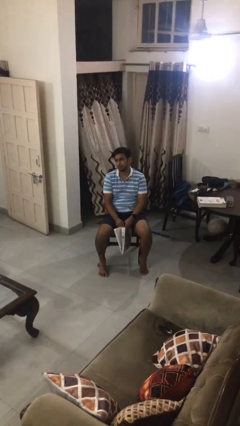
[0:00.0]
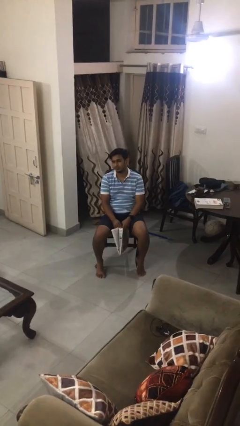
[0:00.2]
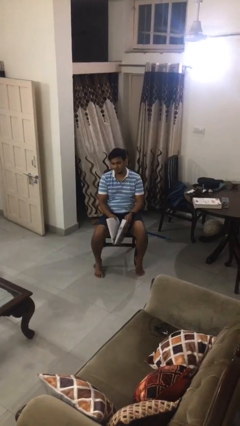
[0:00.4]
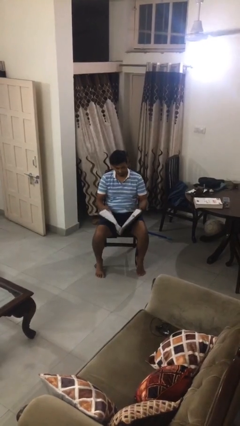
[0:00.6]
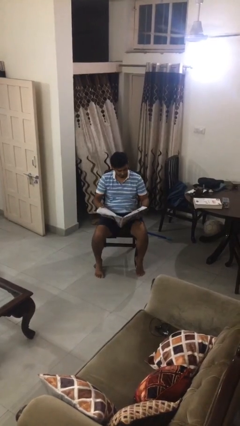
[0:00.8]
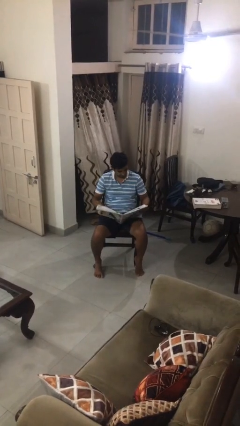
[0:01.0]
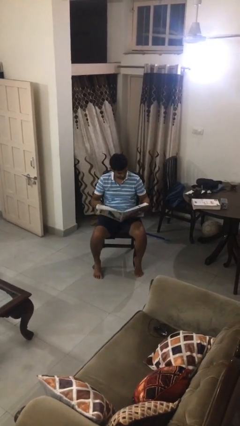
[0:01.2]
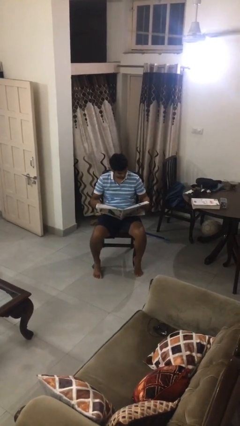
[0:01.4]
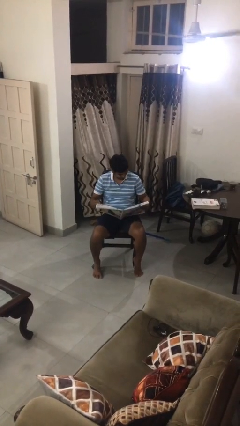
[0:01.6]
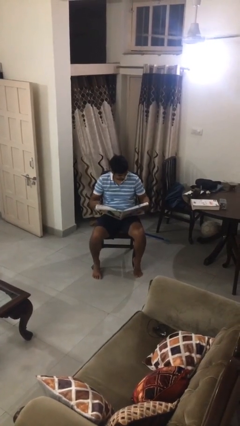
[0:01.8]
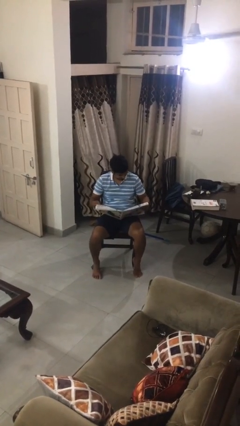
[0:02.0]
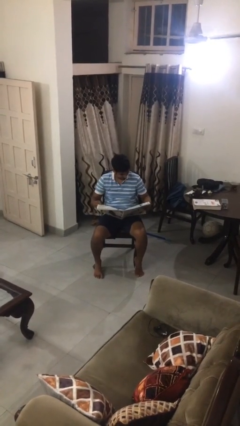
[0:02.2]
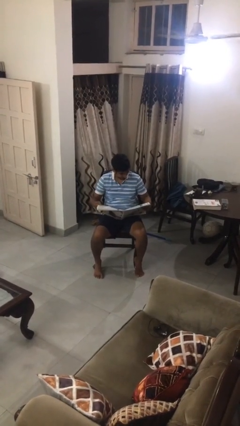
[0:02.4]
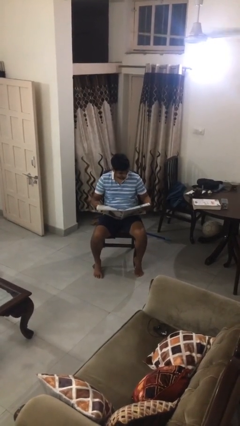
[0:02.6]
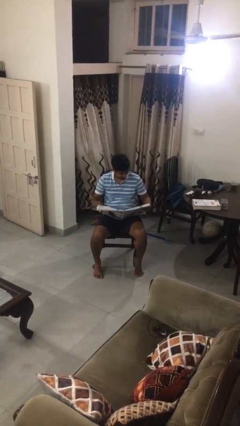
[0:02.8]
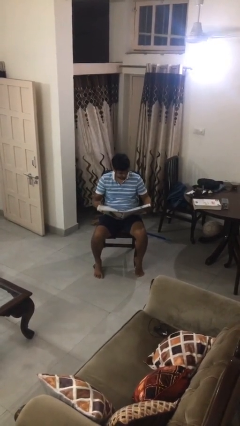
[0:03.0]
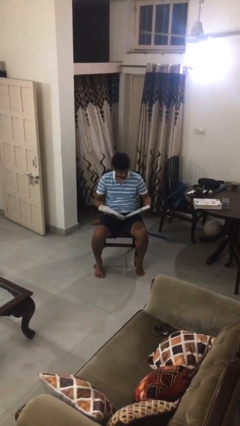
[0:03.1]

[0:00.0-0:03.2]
person reads newspaper

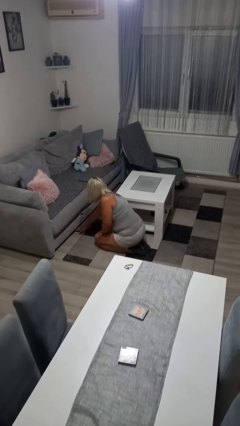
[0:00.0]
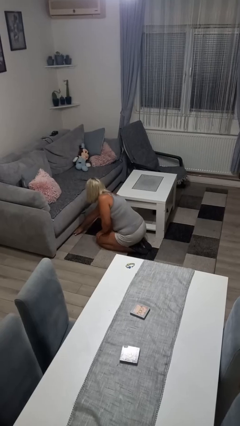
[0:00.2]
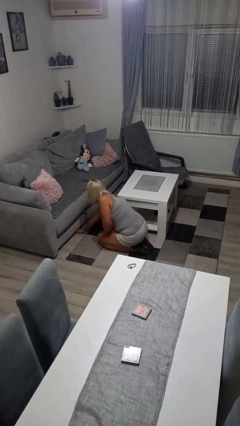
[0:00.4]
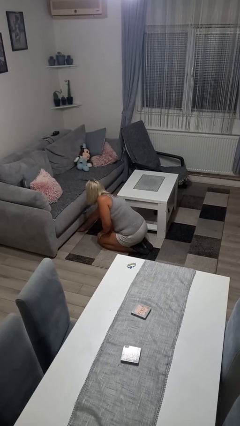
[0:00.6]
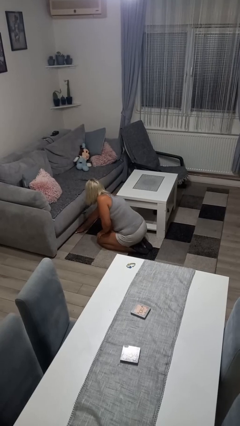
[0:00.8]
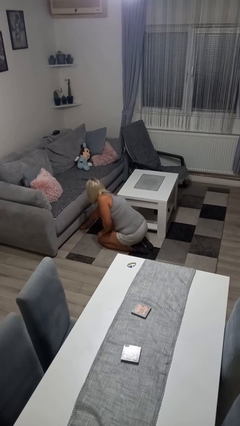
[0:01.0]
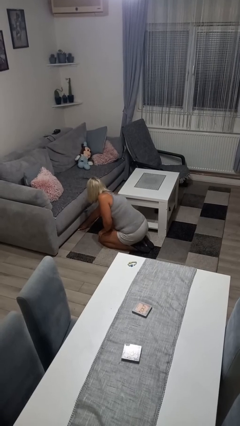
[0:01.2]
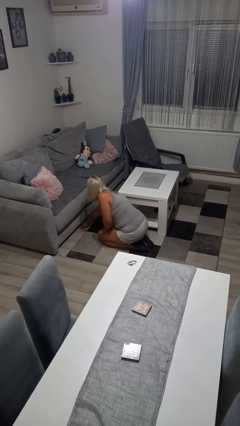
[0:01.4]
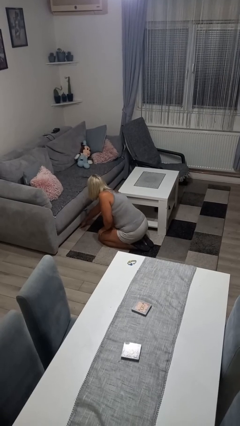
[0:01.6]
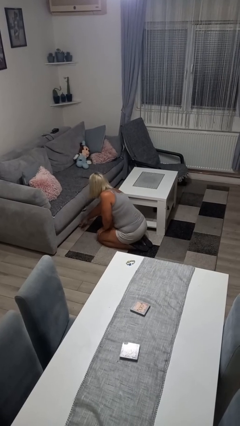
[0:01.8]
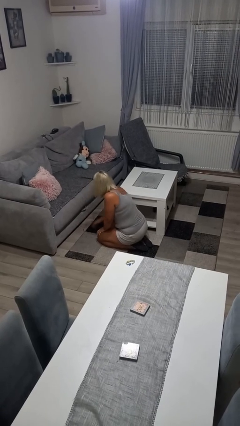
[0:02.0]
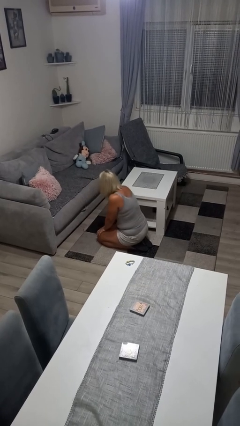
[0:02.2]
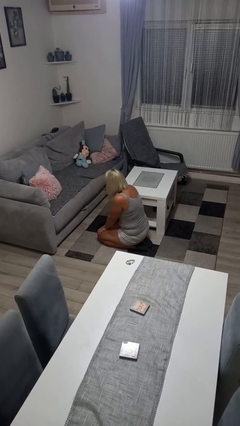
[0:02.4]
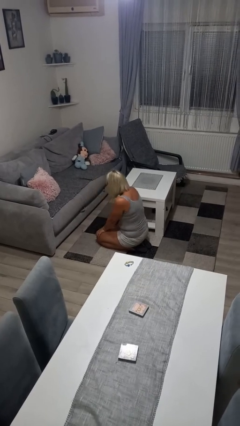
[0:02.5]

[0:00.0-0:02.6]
person searches under couch

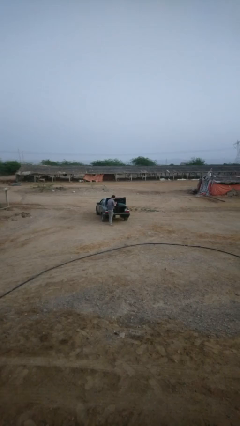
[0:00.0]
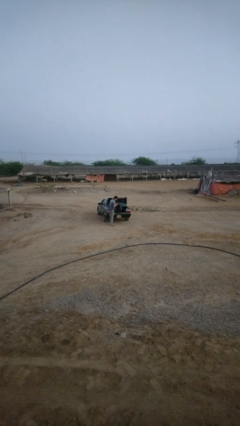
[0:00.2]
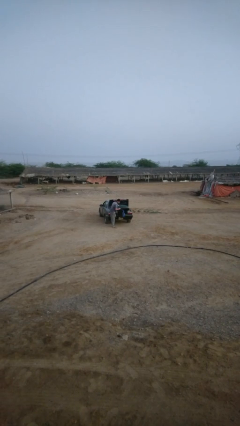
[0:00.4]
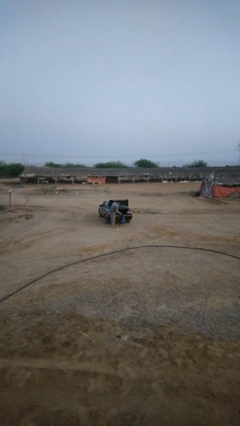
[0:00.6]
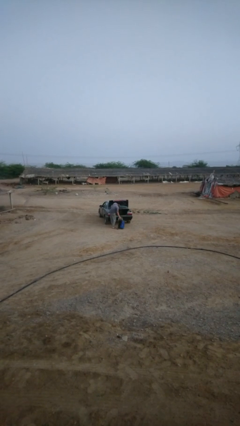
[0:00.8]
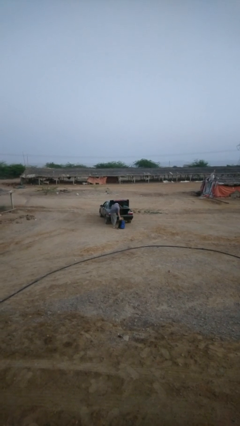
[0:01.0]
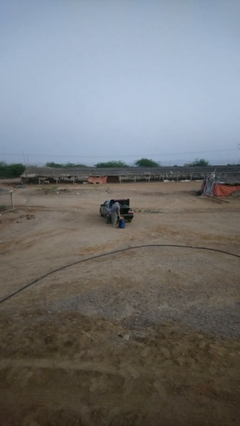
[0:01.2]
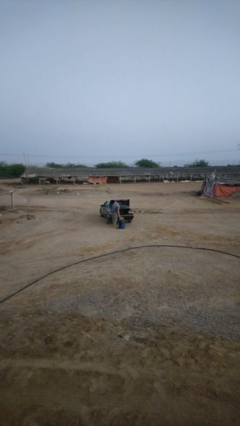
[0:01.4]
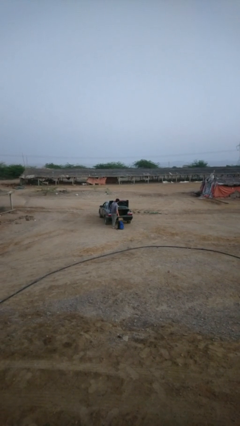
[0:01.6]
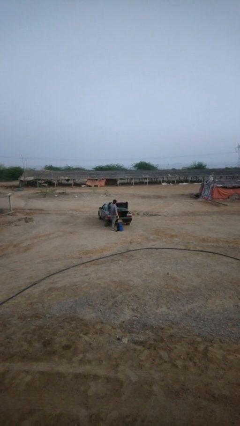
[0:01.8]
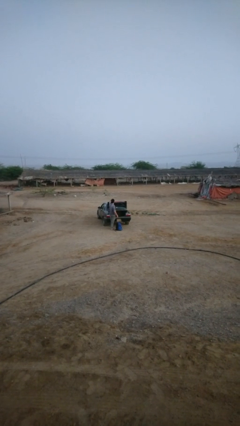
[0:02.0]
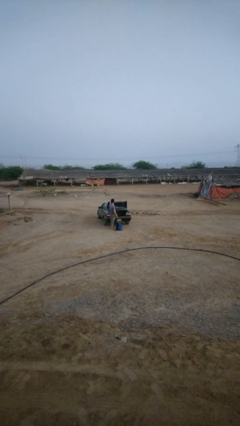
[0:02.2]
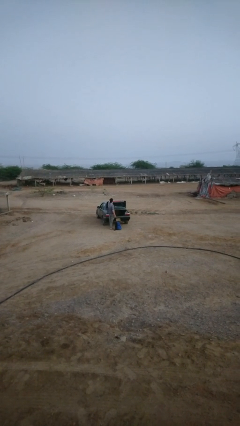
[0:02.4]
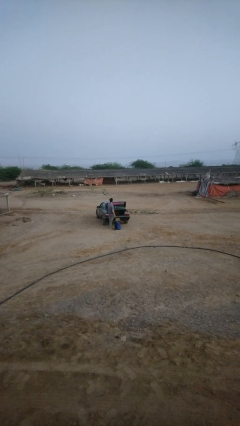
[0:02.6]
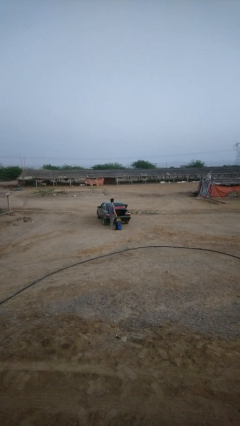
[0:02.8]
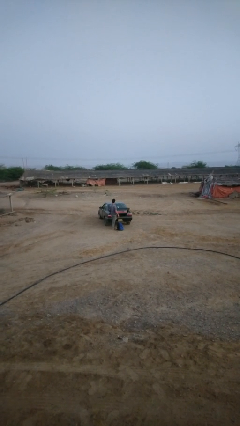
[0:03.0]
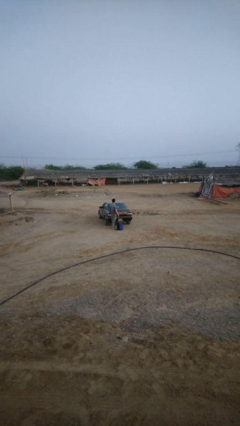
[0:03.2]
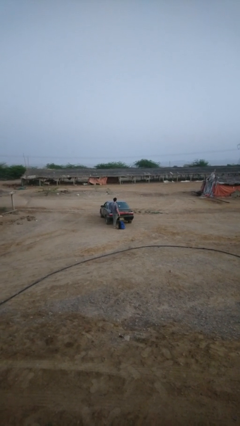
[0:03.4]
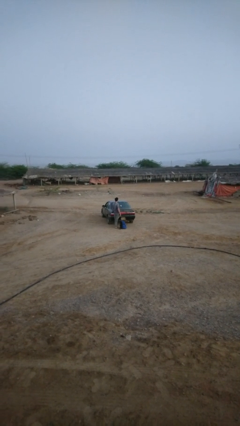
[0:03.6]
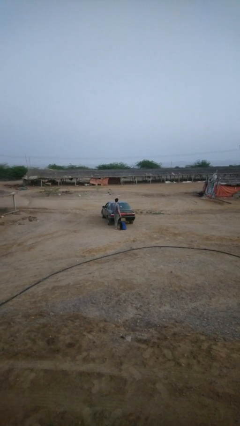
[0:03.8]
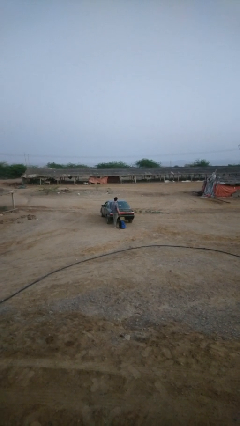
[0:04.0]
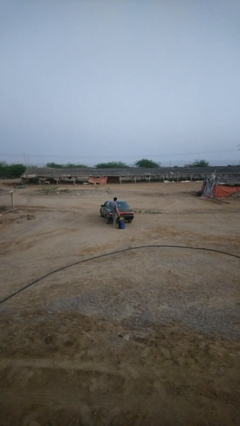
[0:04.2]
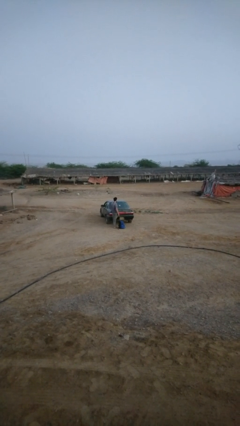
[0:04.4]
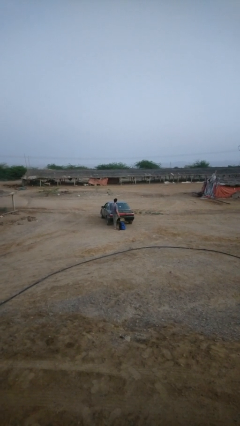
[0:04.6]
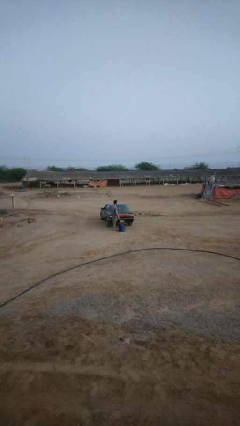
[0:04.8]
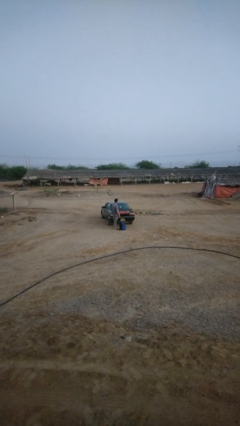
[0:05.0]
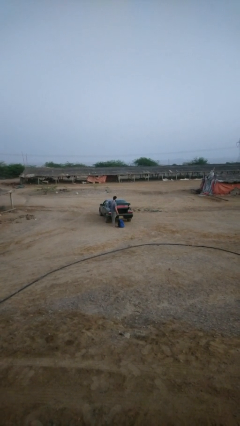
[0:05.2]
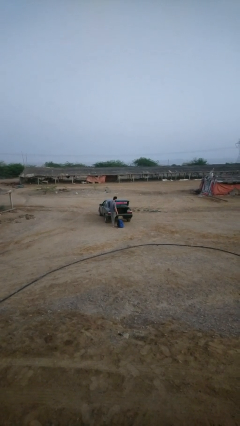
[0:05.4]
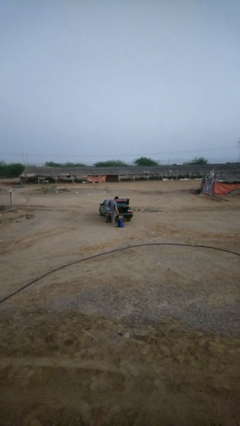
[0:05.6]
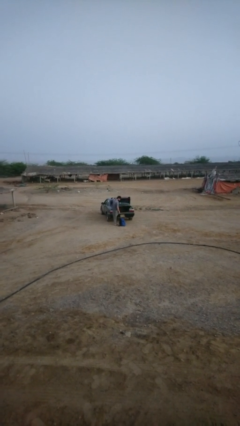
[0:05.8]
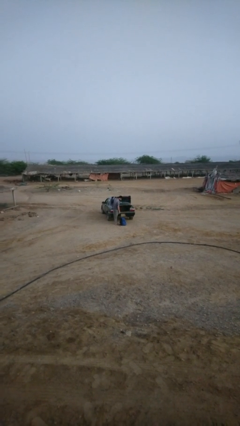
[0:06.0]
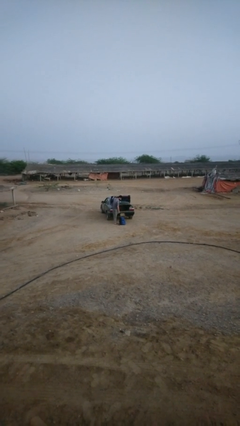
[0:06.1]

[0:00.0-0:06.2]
person unloads car

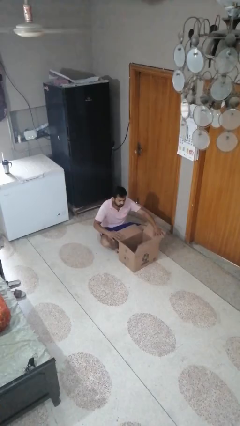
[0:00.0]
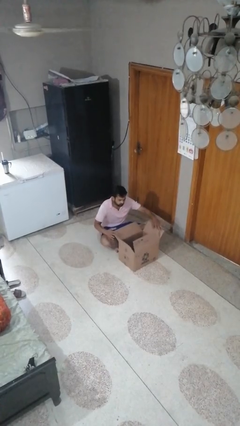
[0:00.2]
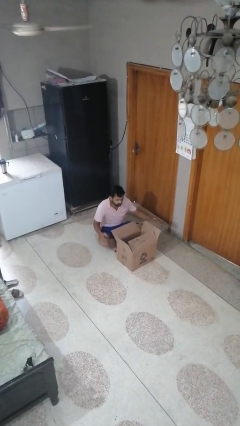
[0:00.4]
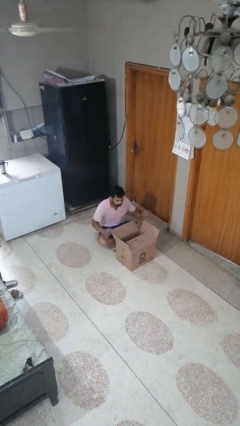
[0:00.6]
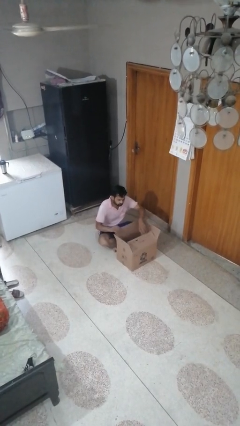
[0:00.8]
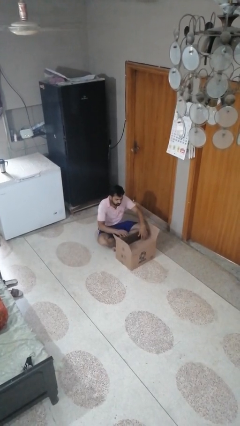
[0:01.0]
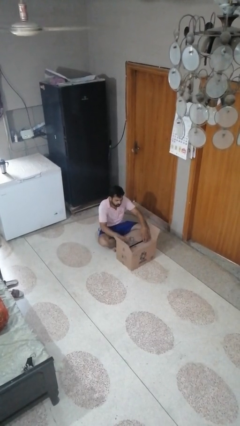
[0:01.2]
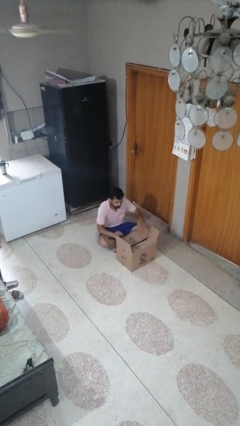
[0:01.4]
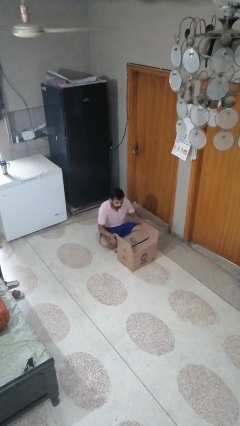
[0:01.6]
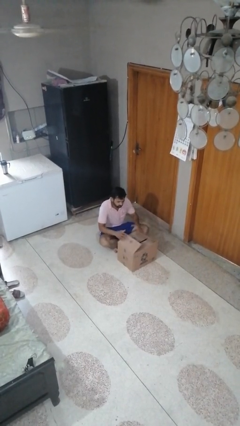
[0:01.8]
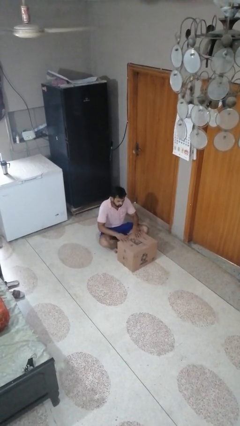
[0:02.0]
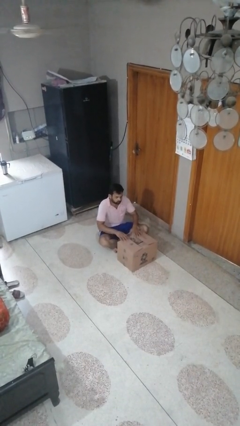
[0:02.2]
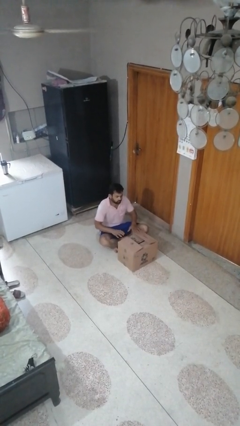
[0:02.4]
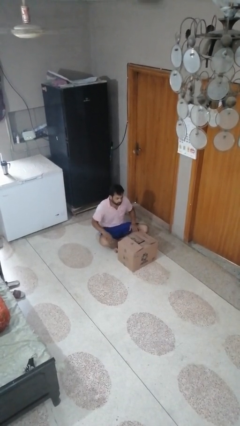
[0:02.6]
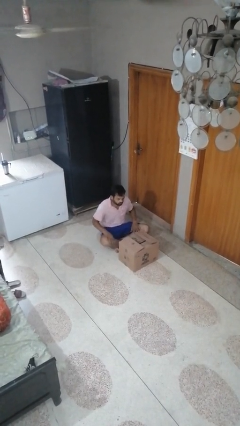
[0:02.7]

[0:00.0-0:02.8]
person closes box

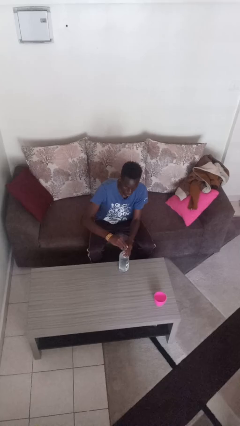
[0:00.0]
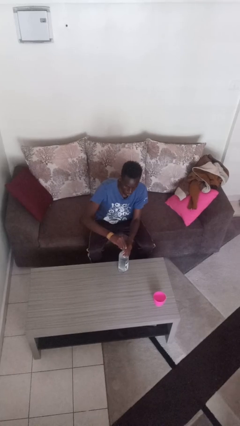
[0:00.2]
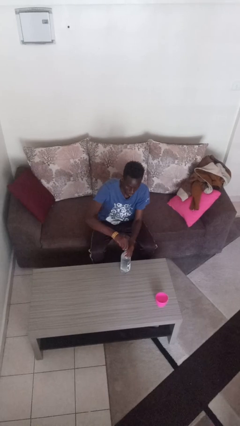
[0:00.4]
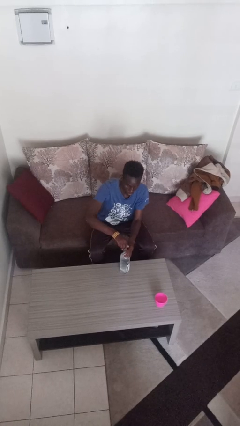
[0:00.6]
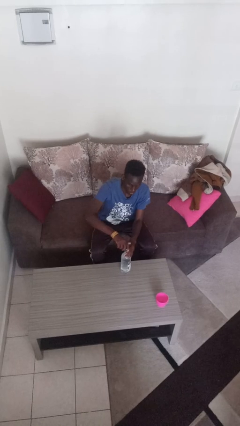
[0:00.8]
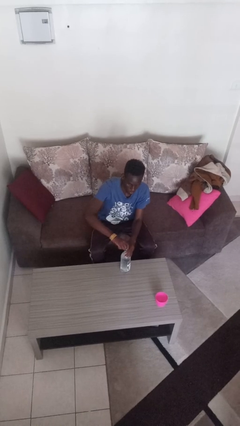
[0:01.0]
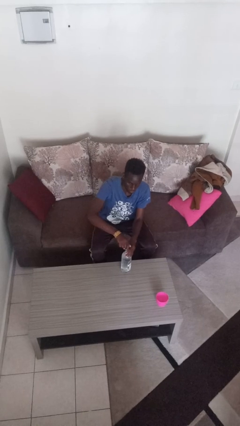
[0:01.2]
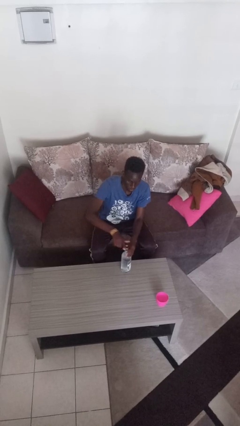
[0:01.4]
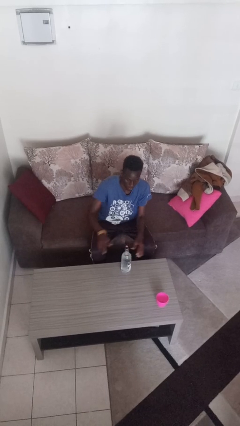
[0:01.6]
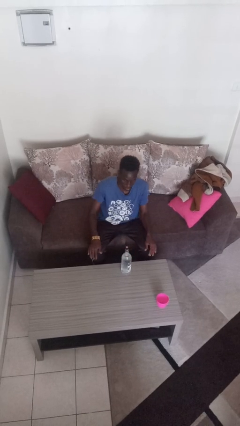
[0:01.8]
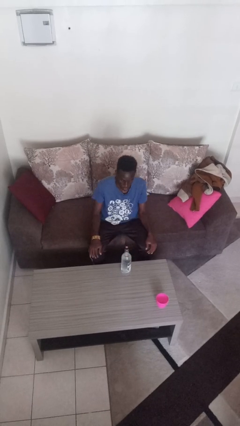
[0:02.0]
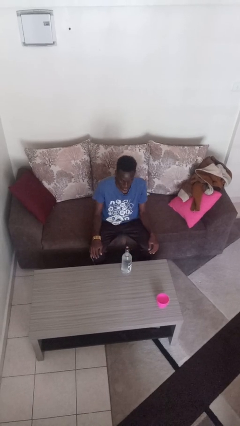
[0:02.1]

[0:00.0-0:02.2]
person screws lid to bottle

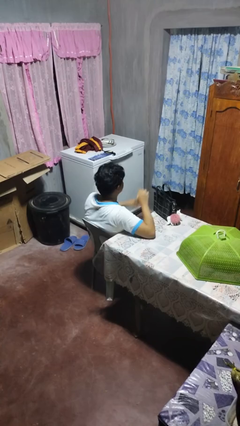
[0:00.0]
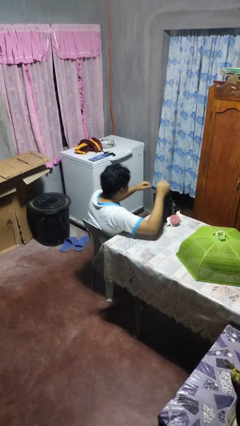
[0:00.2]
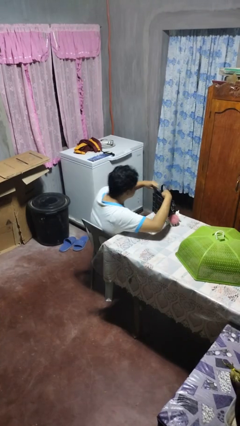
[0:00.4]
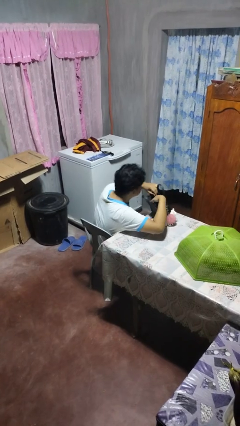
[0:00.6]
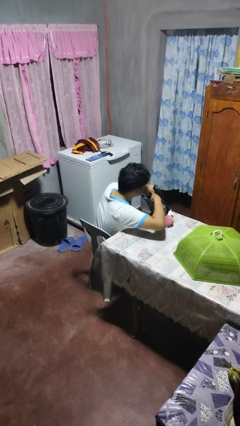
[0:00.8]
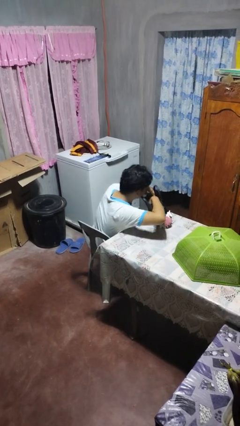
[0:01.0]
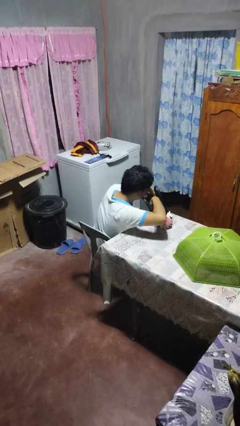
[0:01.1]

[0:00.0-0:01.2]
person searches in purse
